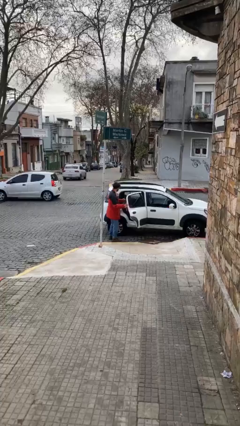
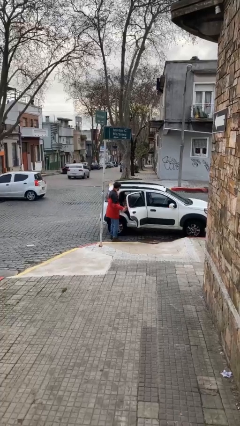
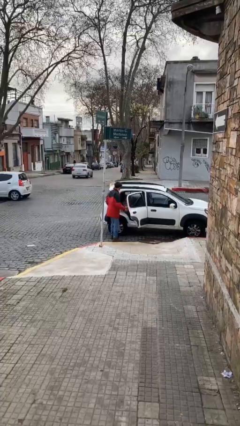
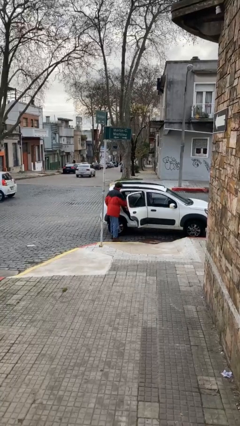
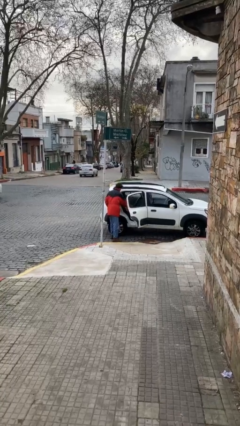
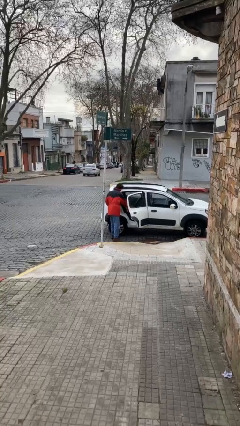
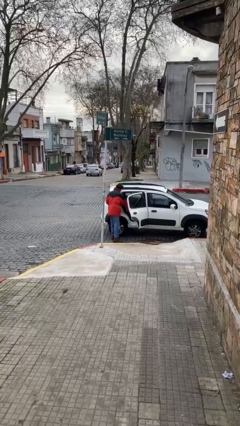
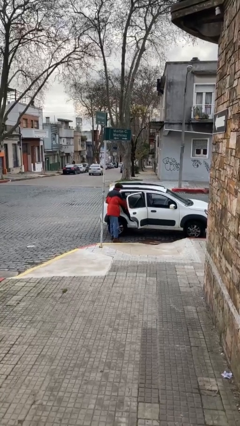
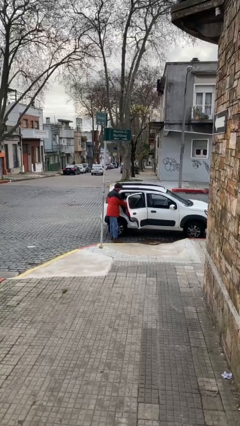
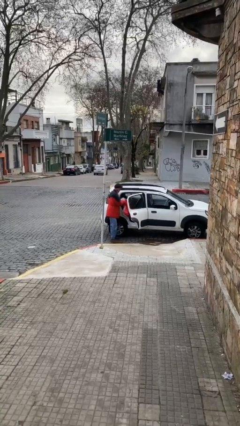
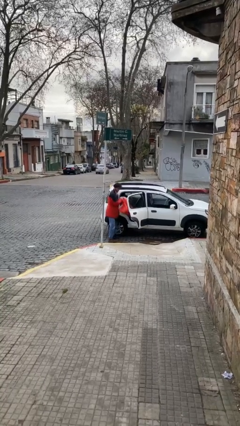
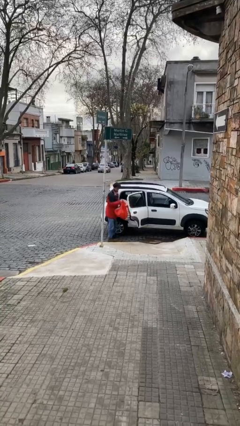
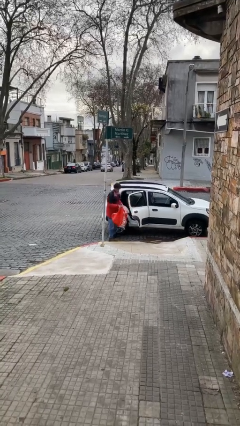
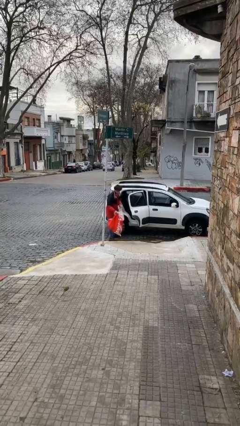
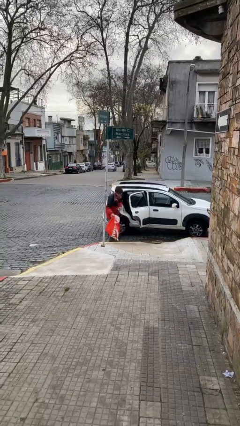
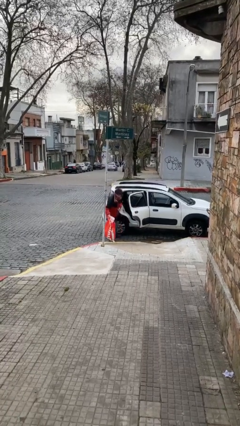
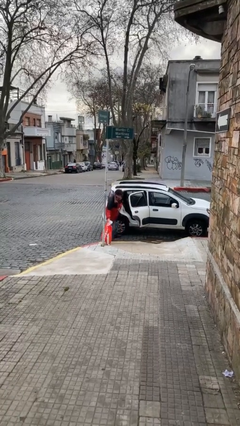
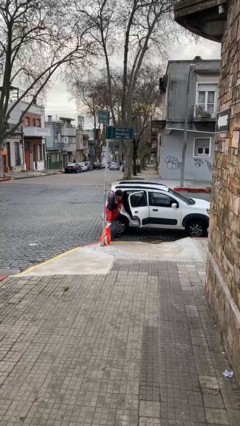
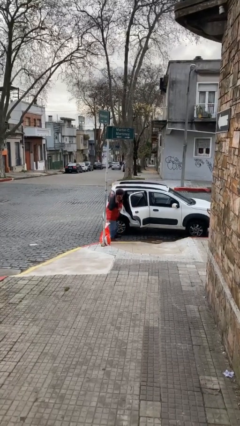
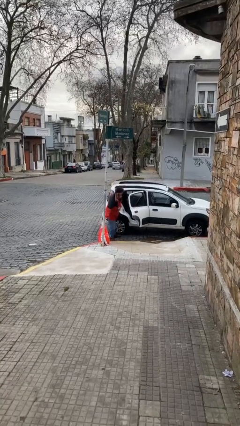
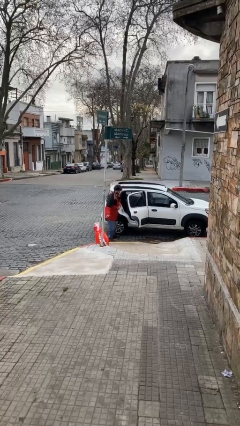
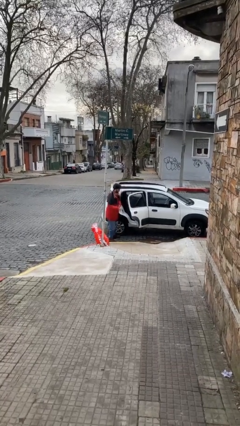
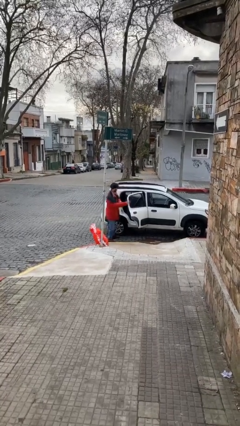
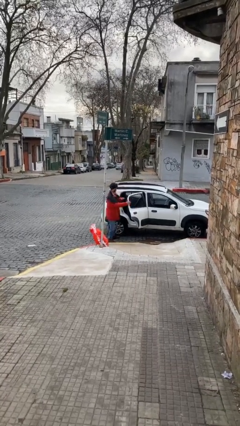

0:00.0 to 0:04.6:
person unloads car

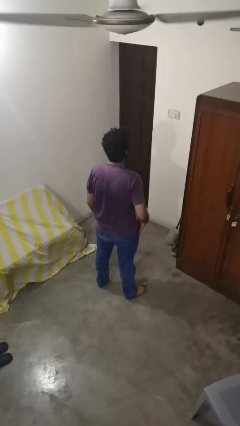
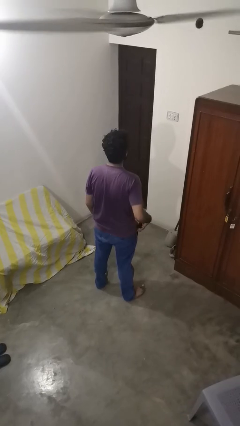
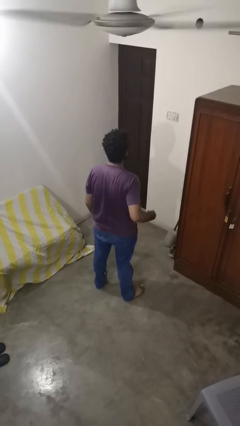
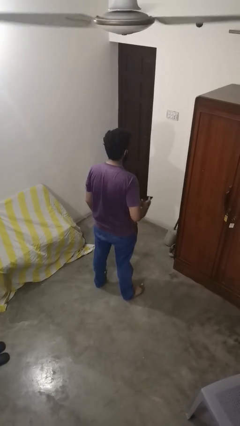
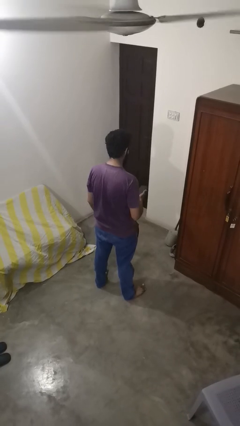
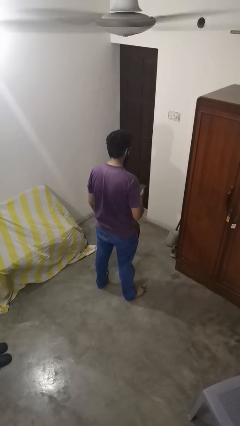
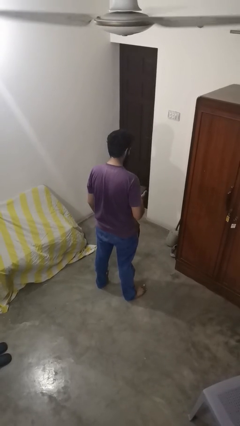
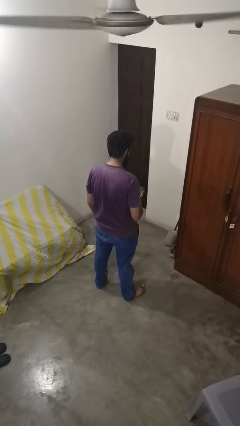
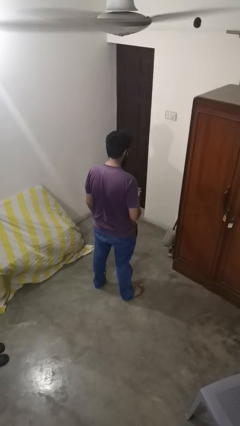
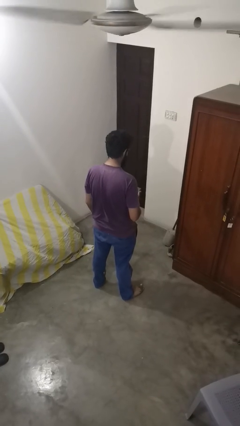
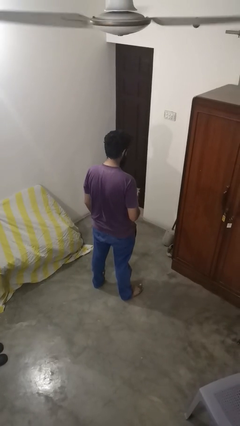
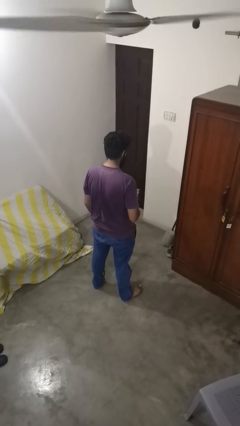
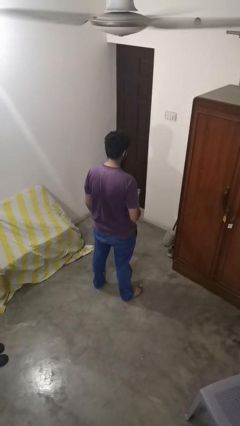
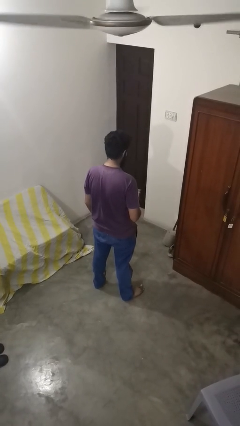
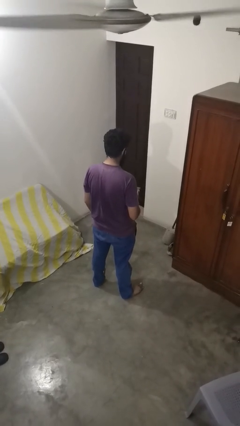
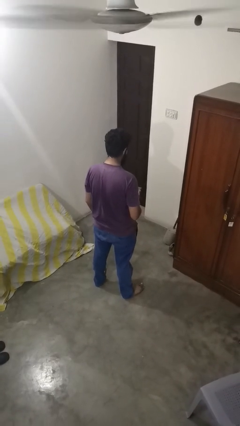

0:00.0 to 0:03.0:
person takes phone from pocket

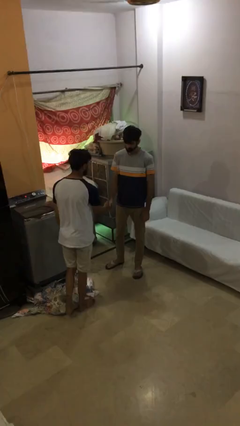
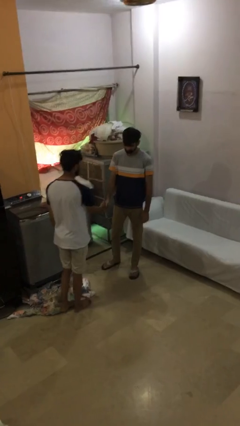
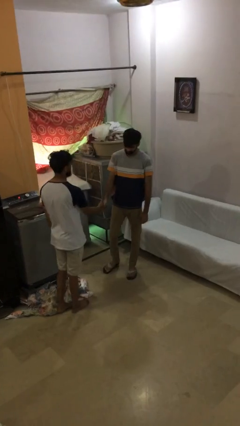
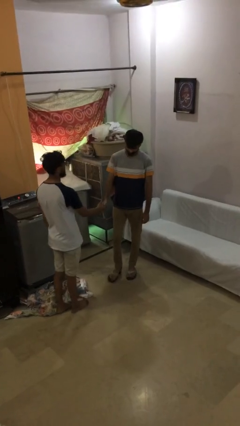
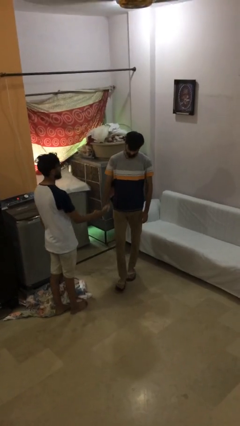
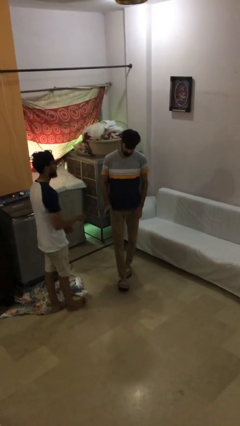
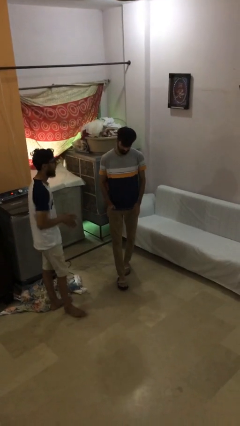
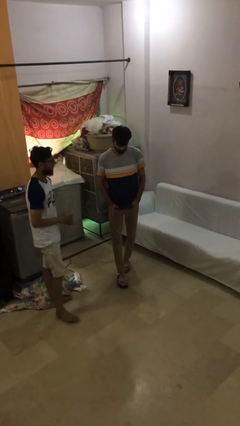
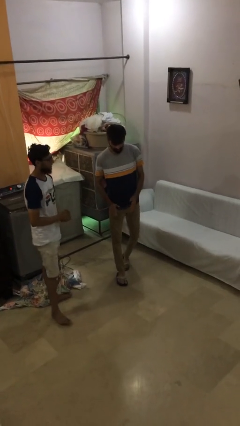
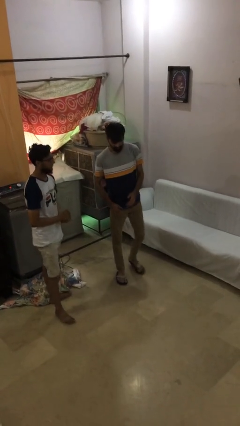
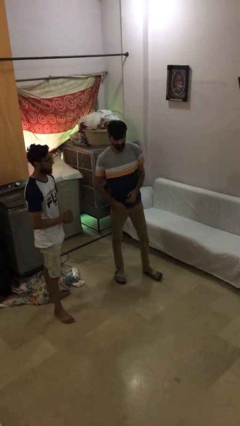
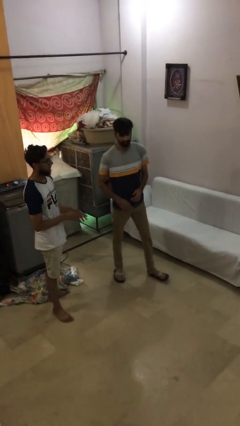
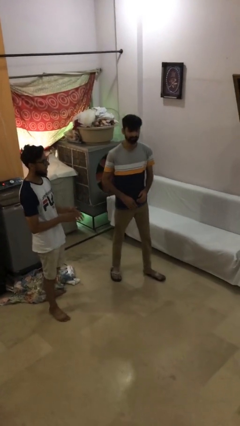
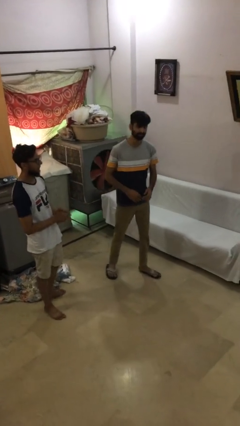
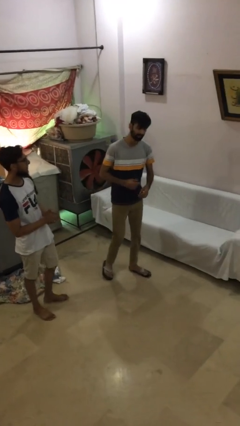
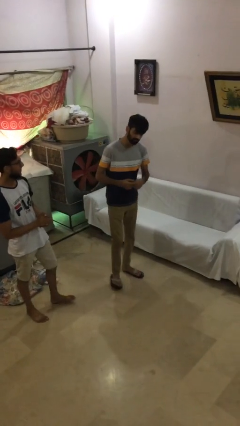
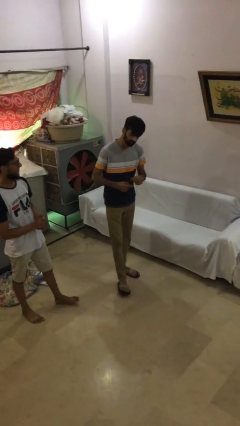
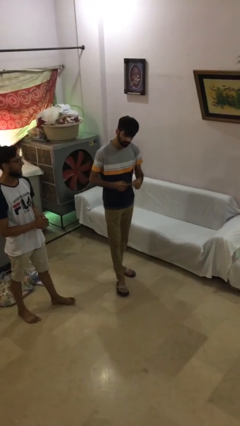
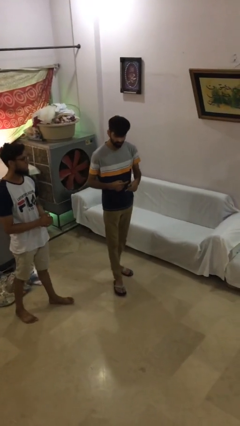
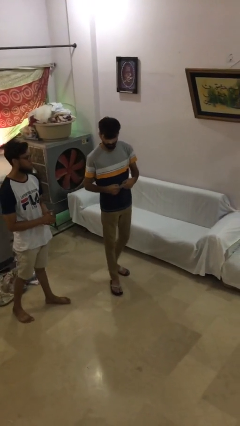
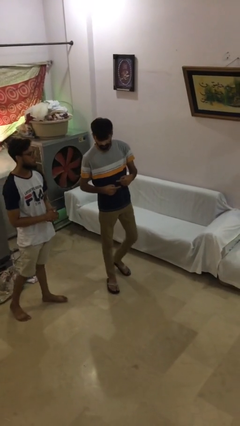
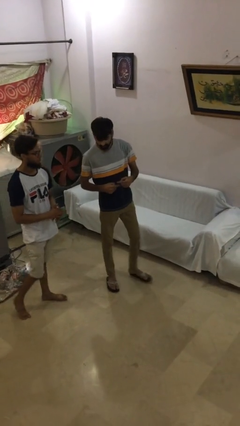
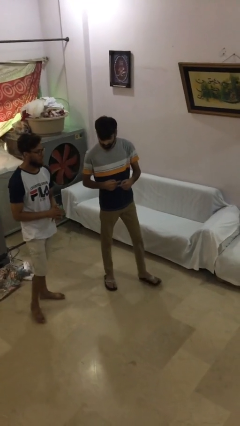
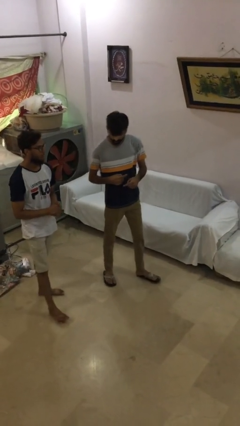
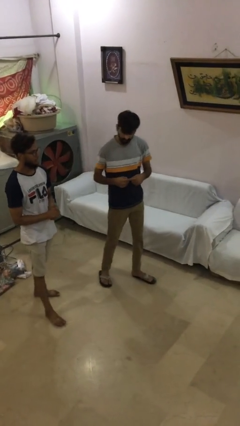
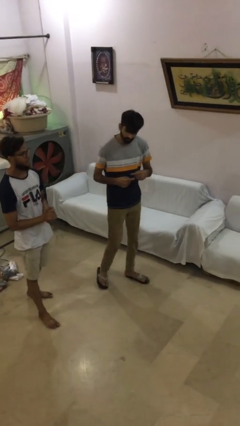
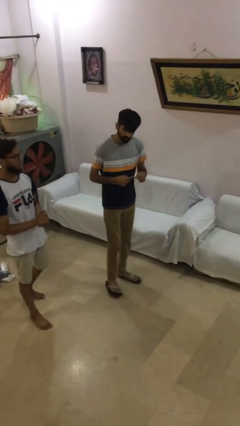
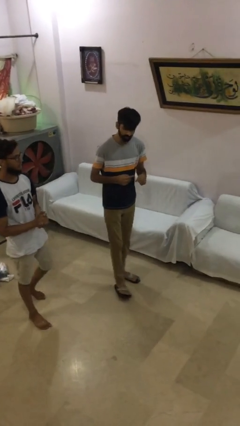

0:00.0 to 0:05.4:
person talks to person

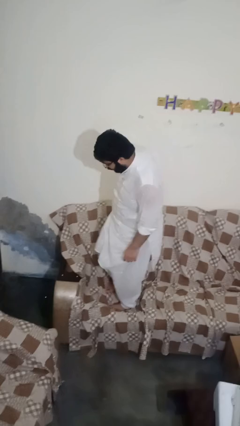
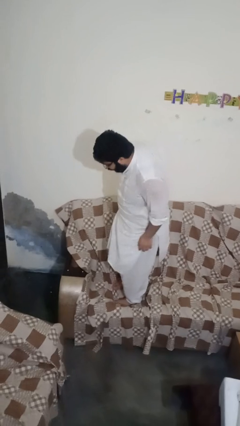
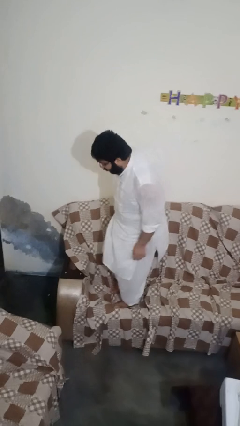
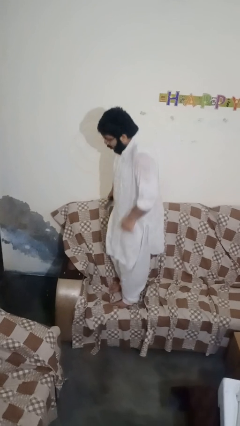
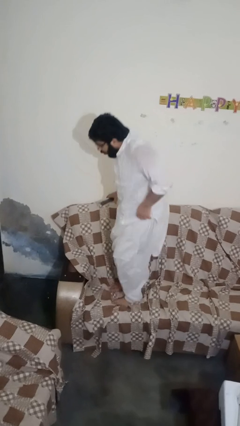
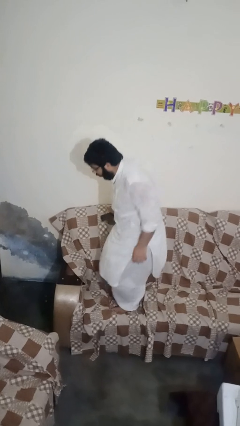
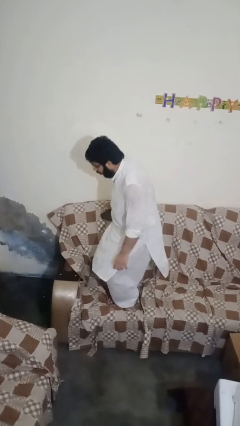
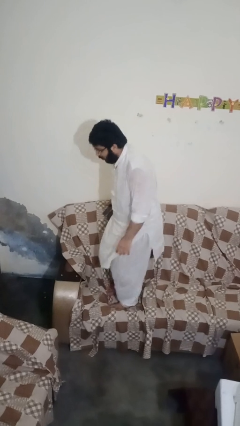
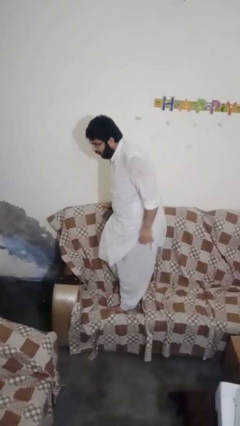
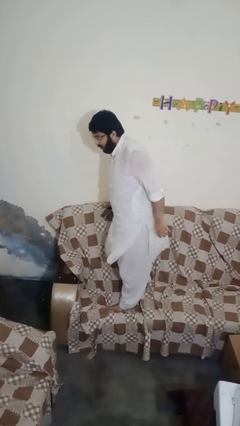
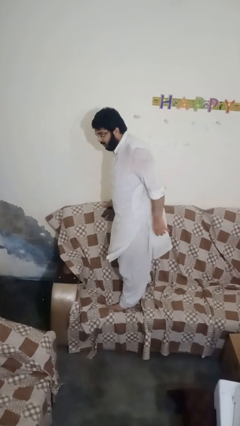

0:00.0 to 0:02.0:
person jumps on couch

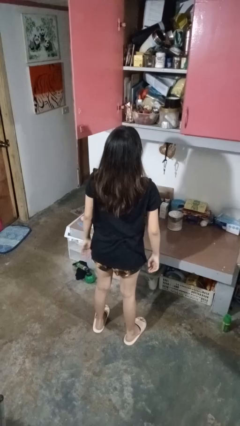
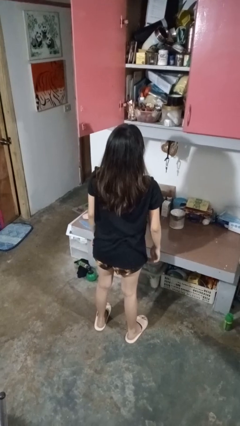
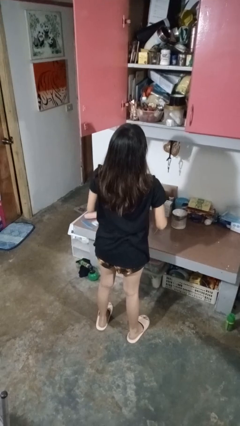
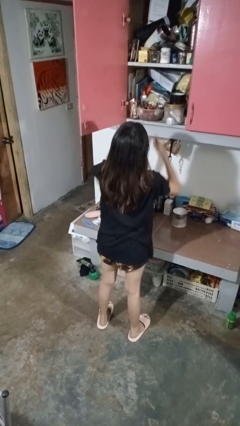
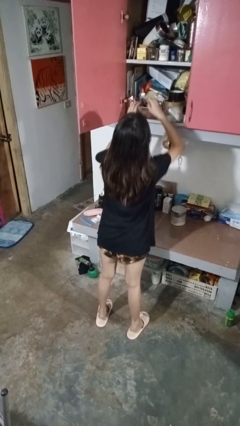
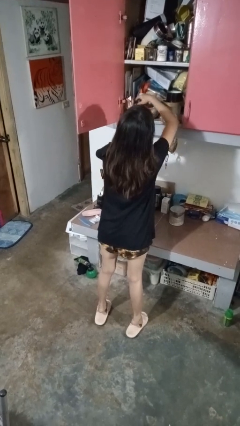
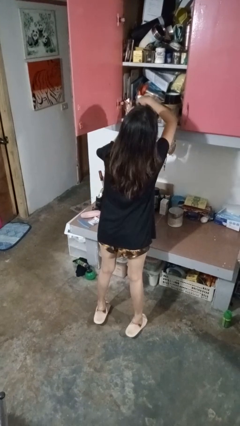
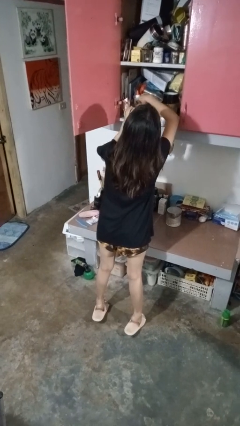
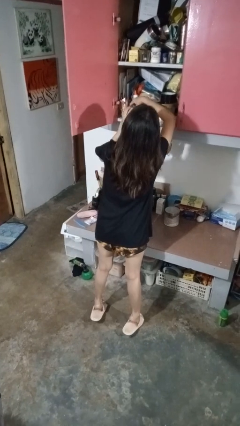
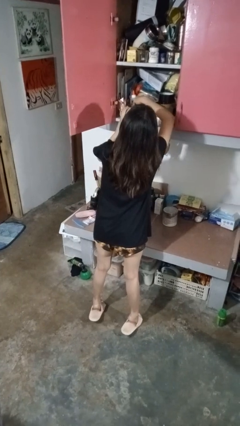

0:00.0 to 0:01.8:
person searches in cabinet

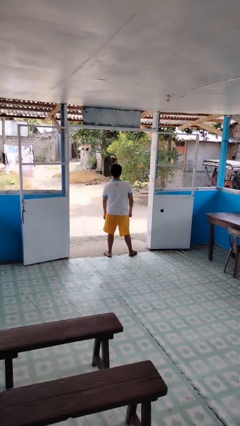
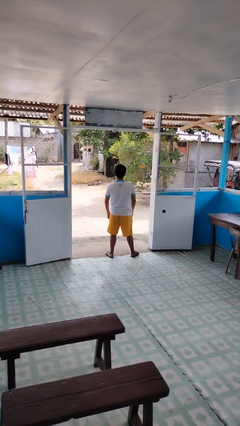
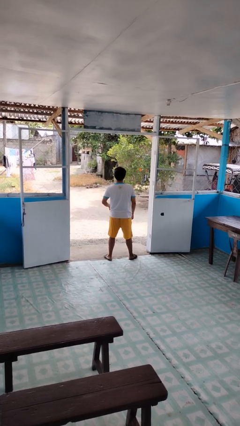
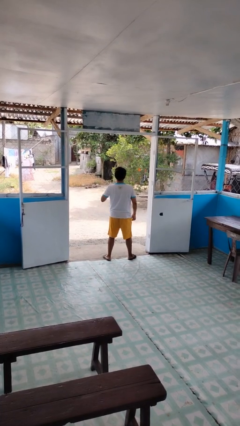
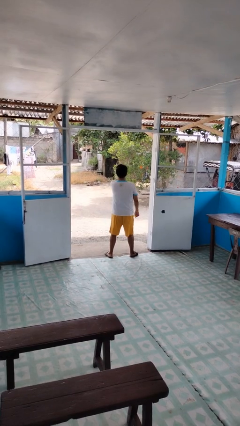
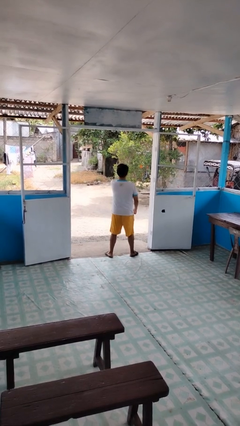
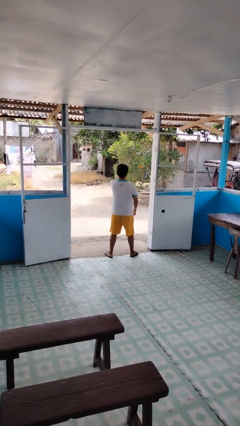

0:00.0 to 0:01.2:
person punches
